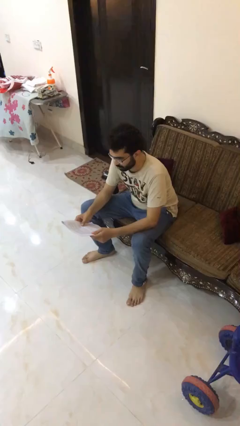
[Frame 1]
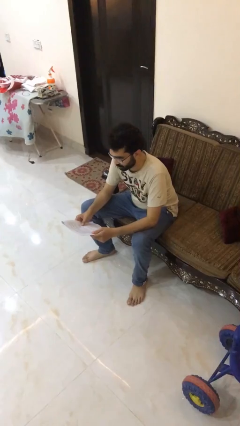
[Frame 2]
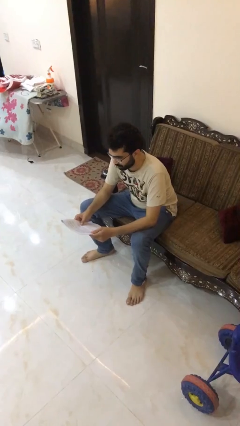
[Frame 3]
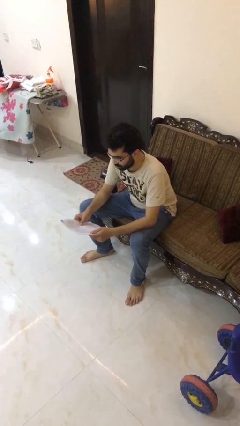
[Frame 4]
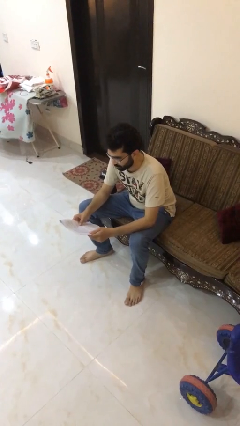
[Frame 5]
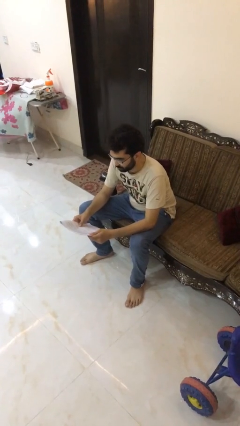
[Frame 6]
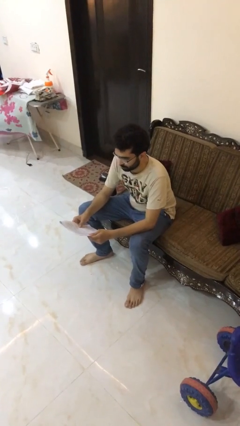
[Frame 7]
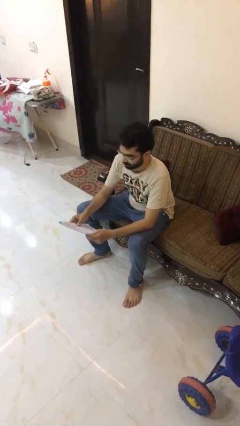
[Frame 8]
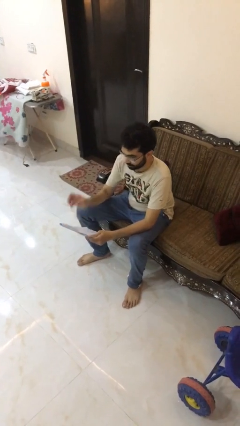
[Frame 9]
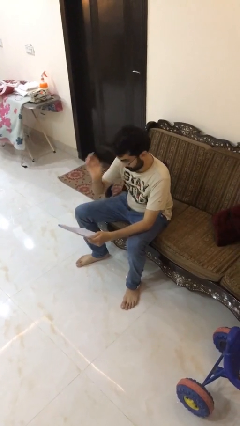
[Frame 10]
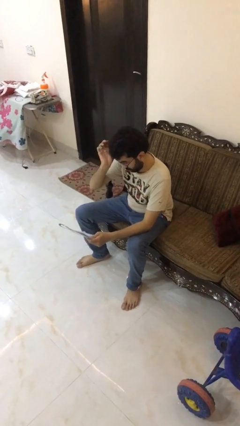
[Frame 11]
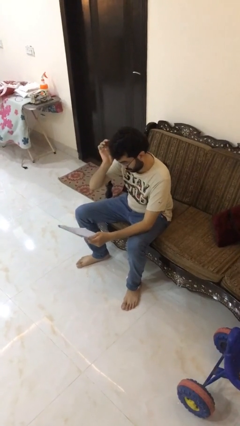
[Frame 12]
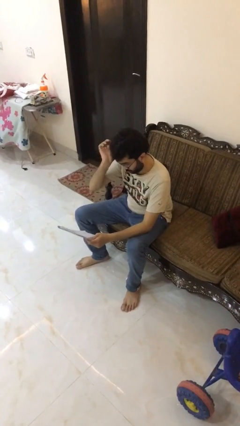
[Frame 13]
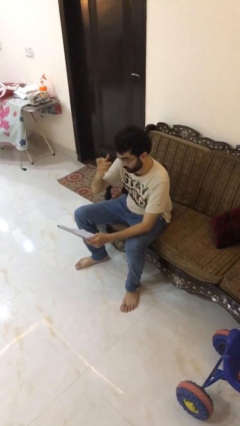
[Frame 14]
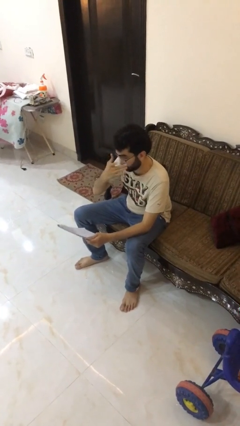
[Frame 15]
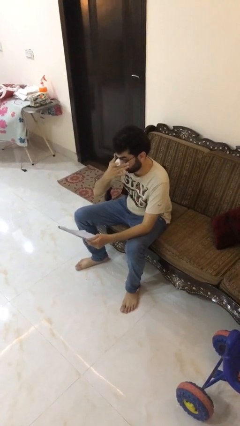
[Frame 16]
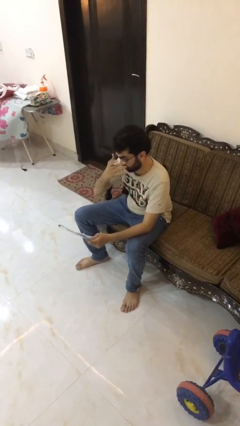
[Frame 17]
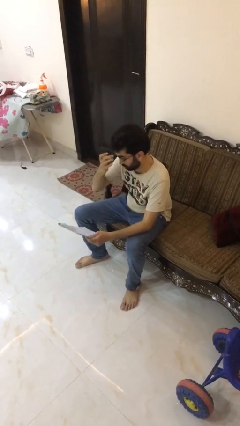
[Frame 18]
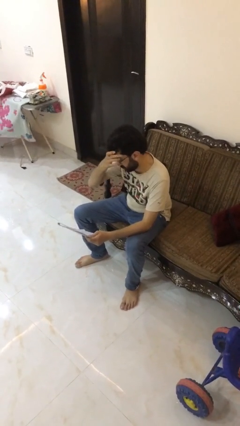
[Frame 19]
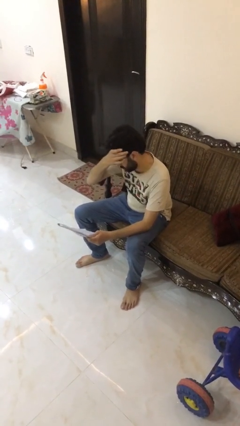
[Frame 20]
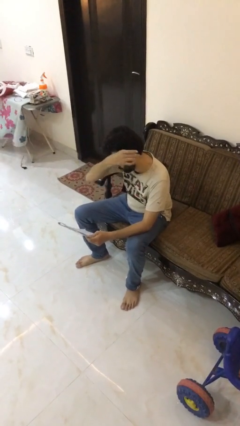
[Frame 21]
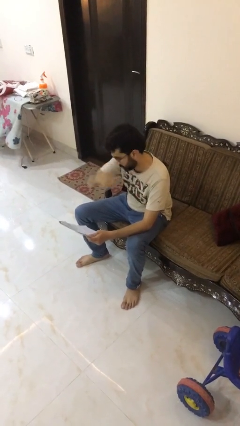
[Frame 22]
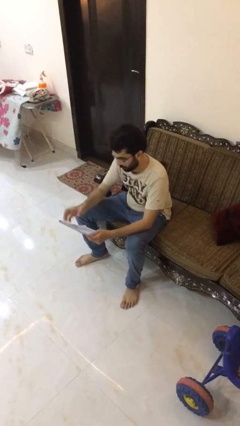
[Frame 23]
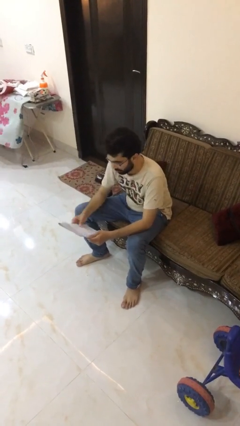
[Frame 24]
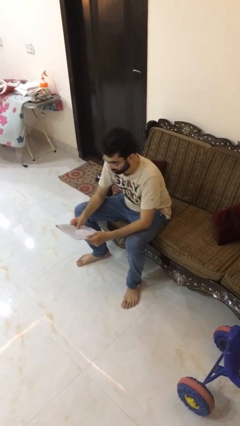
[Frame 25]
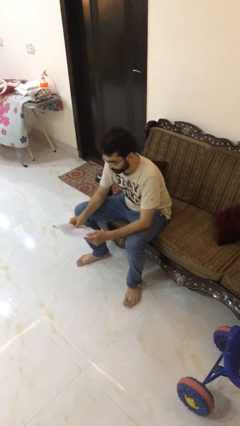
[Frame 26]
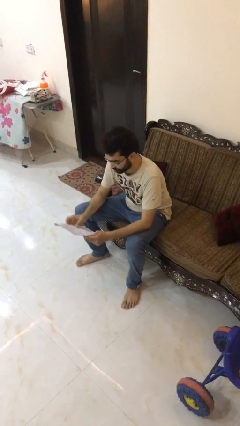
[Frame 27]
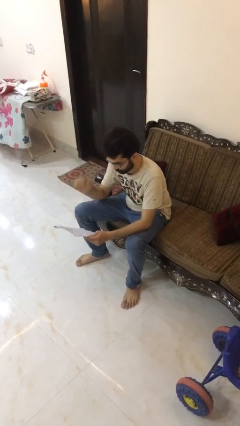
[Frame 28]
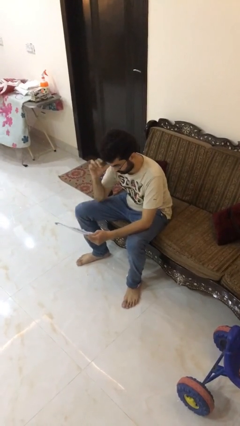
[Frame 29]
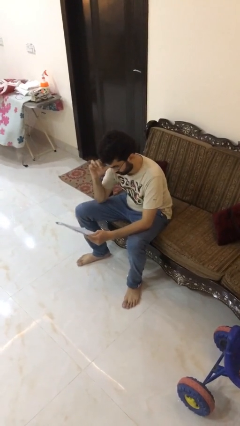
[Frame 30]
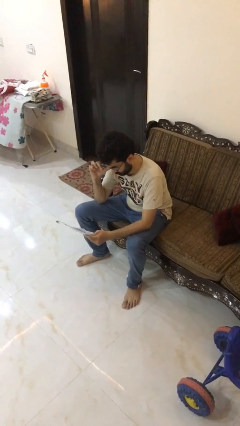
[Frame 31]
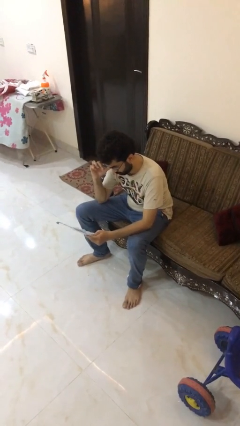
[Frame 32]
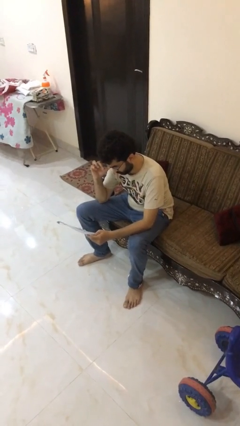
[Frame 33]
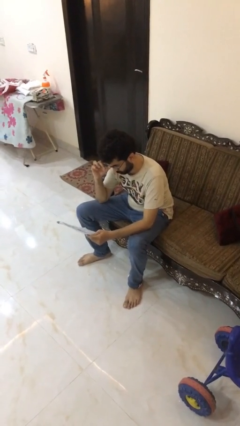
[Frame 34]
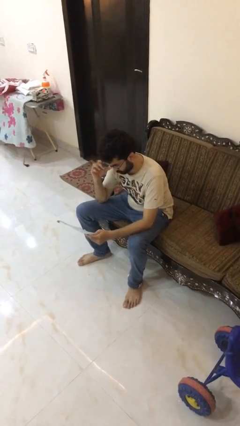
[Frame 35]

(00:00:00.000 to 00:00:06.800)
person reads document

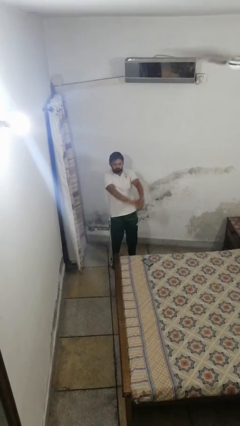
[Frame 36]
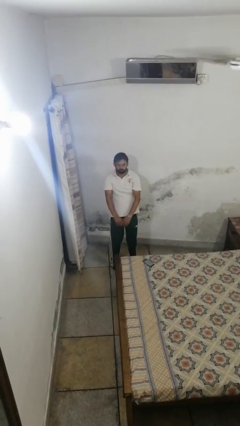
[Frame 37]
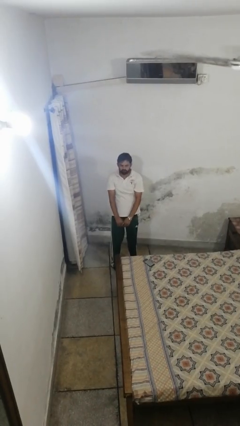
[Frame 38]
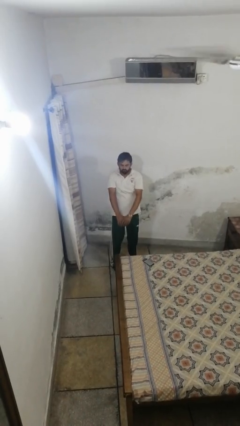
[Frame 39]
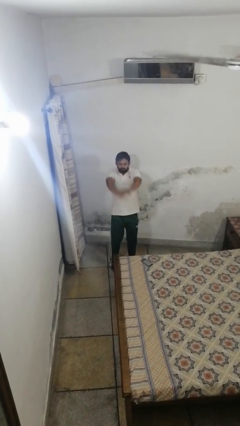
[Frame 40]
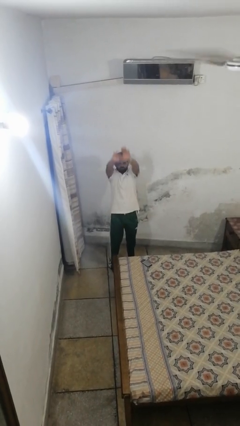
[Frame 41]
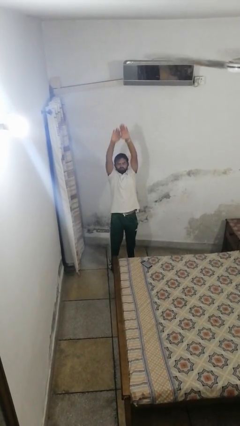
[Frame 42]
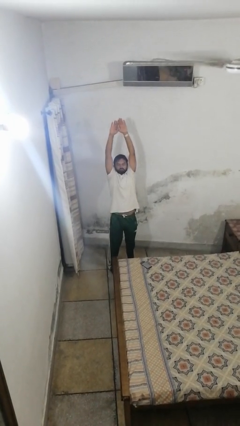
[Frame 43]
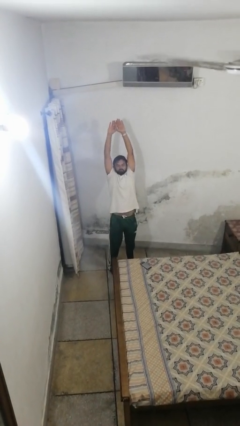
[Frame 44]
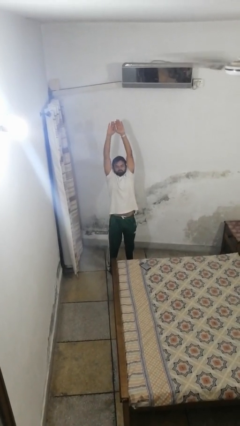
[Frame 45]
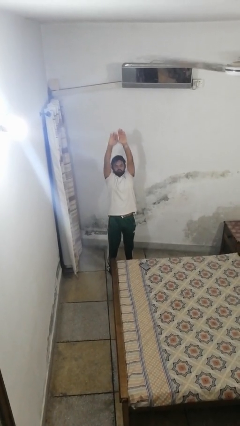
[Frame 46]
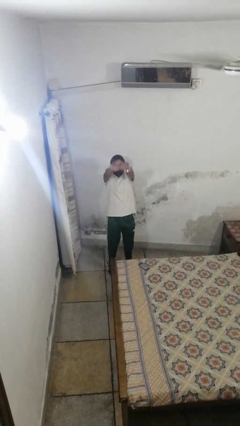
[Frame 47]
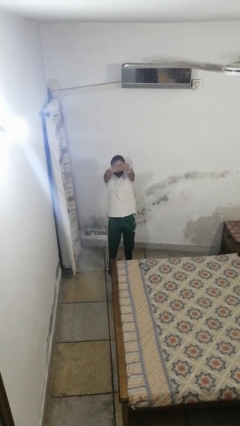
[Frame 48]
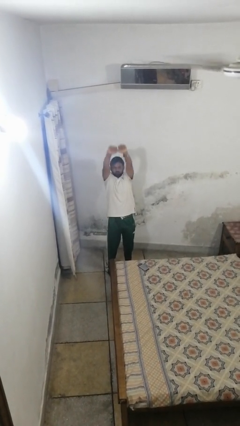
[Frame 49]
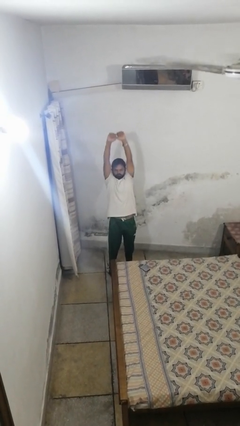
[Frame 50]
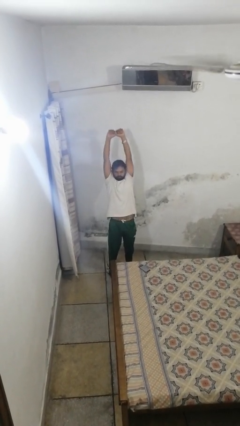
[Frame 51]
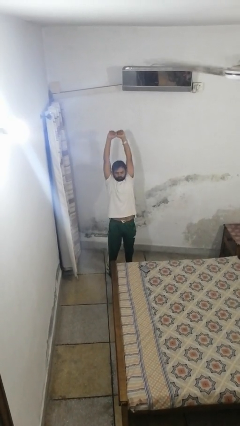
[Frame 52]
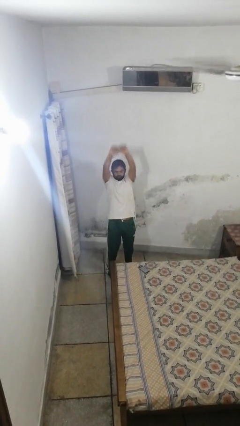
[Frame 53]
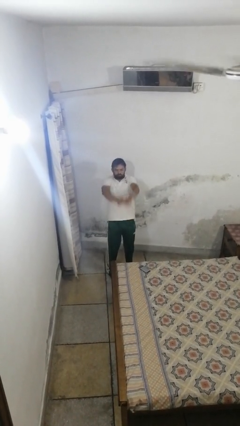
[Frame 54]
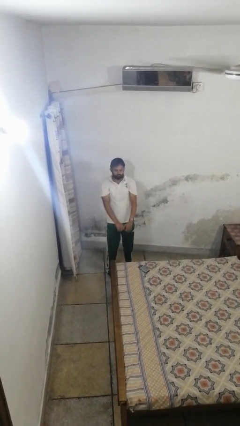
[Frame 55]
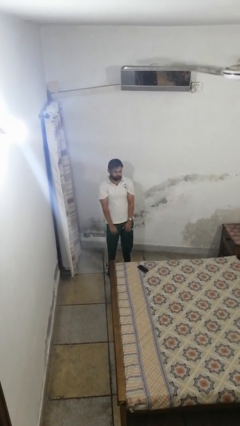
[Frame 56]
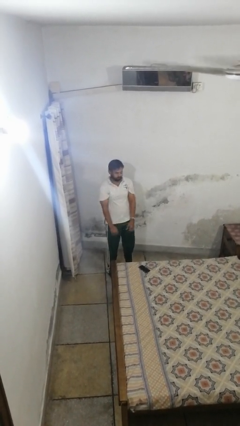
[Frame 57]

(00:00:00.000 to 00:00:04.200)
person stretches arms over head

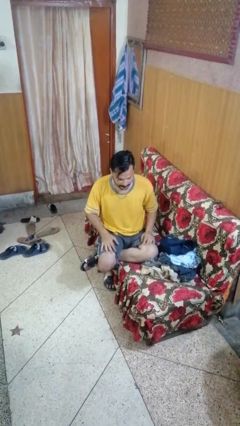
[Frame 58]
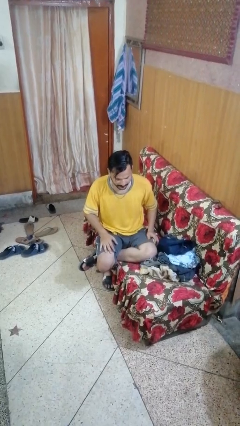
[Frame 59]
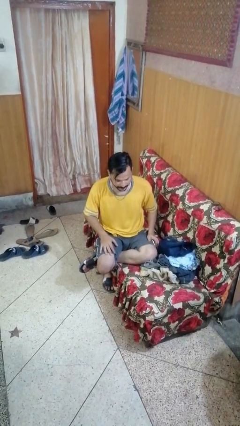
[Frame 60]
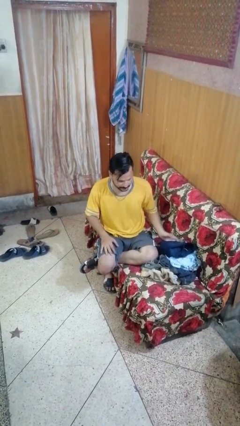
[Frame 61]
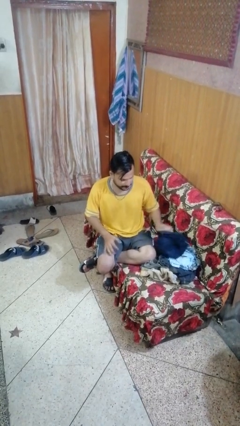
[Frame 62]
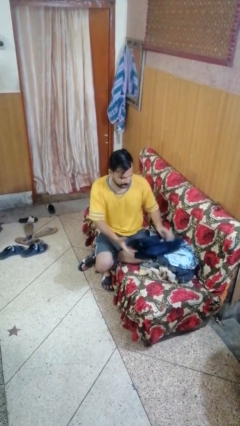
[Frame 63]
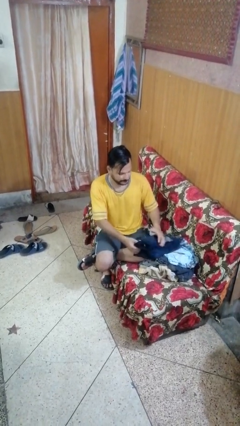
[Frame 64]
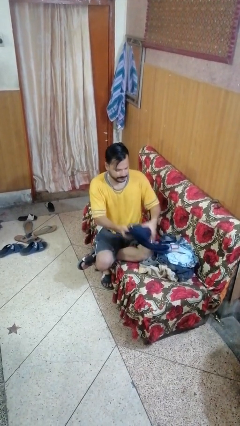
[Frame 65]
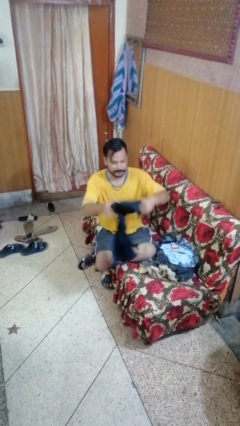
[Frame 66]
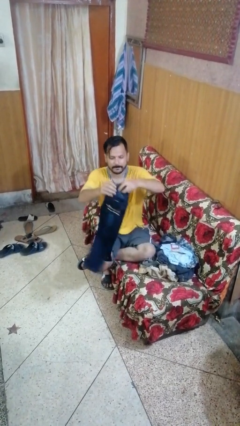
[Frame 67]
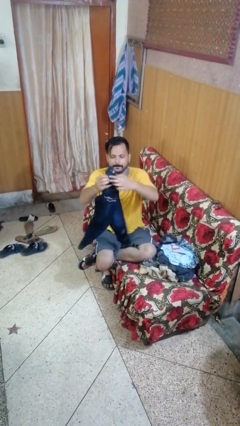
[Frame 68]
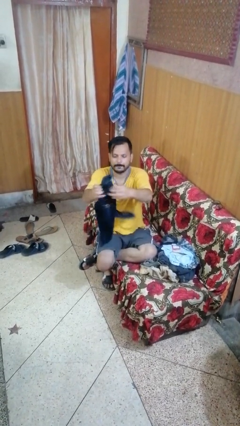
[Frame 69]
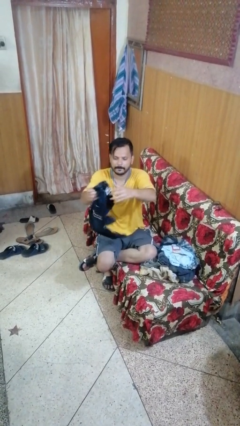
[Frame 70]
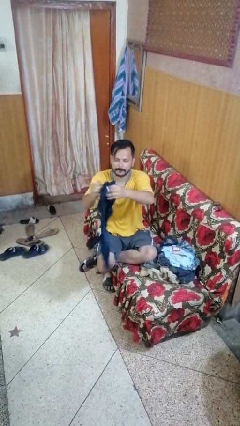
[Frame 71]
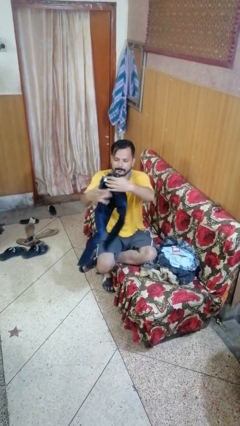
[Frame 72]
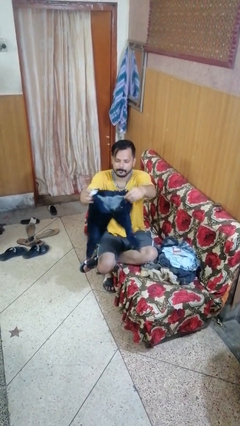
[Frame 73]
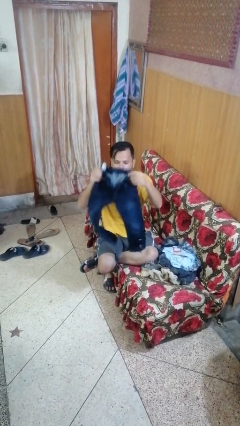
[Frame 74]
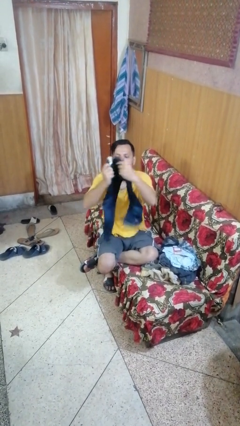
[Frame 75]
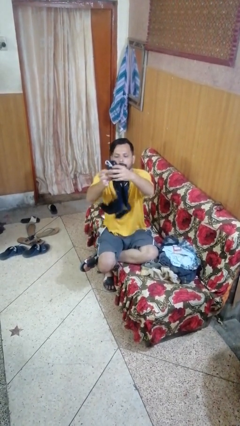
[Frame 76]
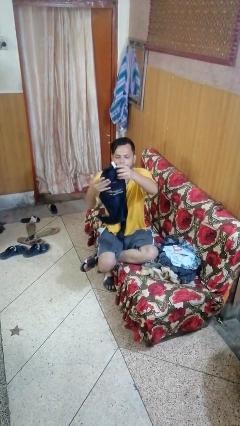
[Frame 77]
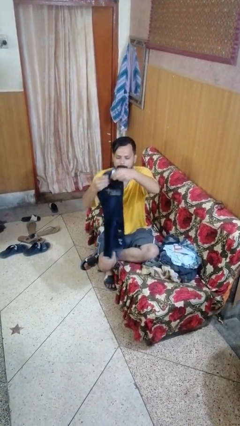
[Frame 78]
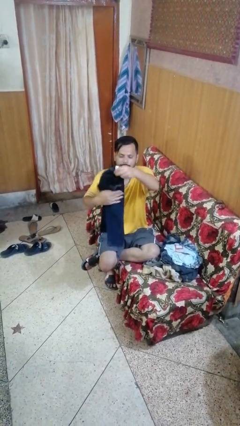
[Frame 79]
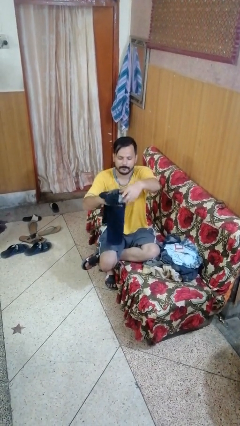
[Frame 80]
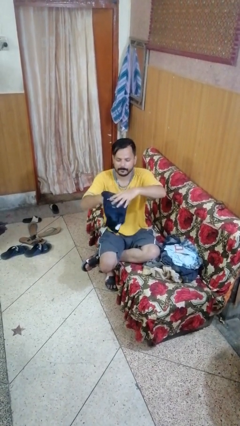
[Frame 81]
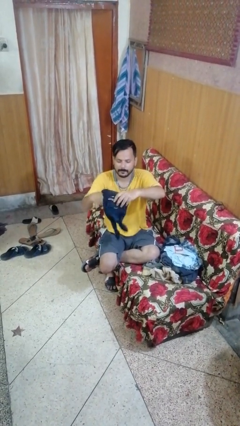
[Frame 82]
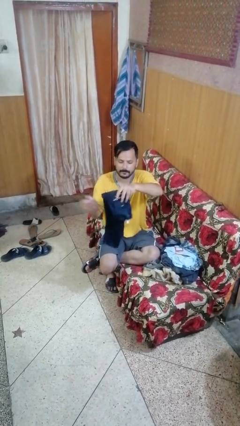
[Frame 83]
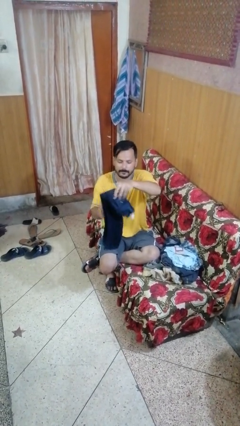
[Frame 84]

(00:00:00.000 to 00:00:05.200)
person folds pants

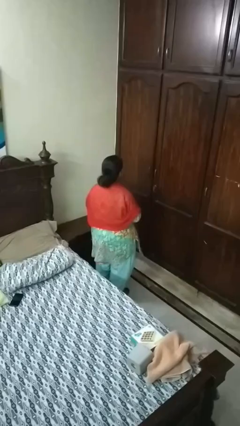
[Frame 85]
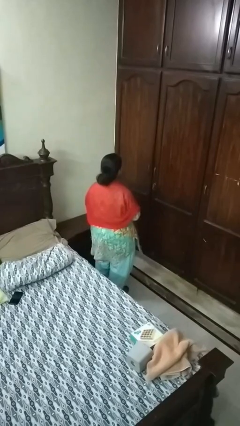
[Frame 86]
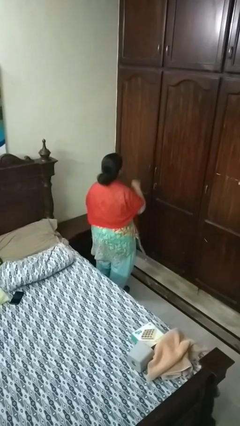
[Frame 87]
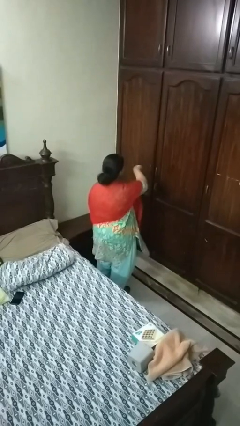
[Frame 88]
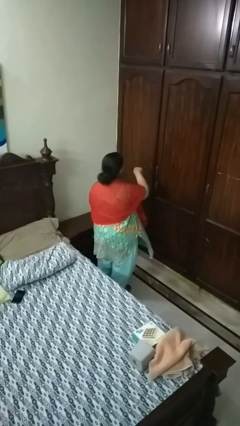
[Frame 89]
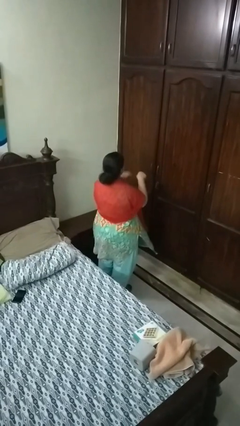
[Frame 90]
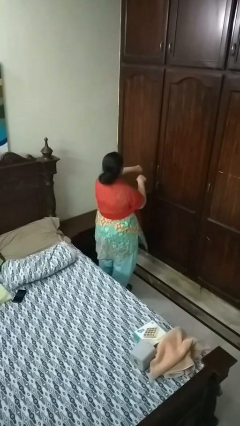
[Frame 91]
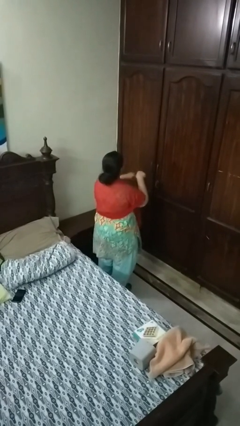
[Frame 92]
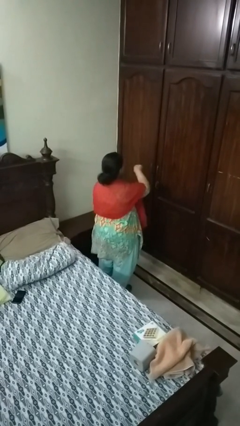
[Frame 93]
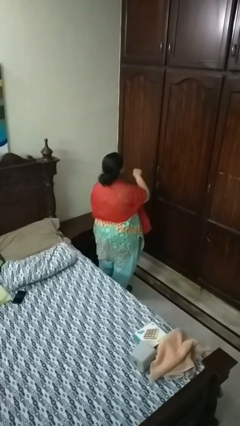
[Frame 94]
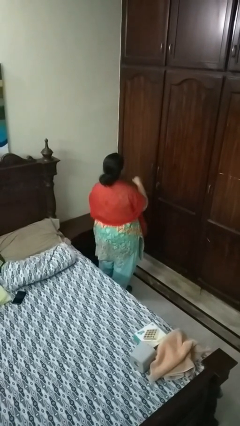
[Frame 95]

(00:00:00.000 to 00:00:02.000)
person punches
